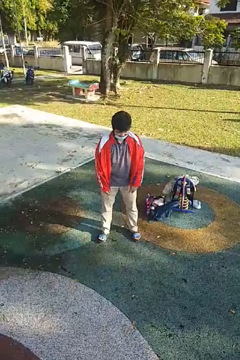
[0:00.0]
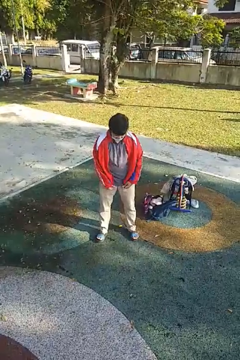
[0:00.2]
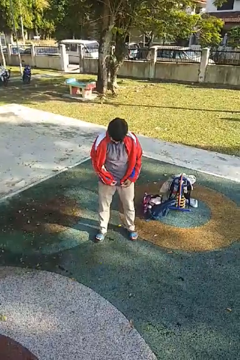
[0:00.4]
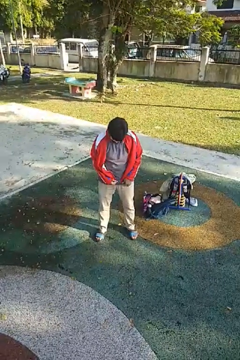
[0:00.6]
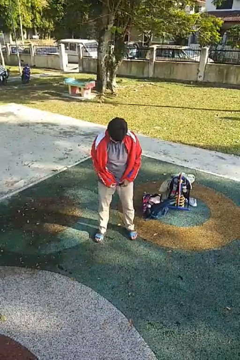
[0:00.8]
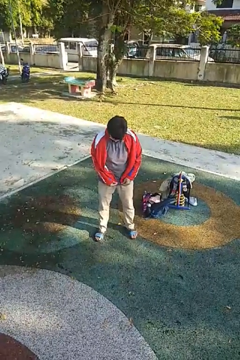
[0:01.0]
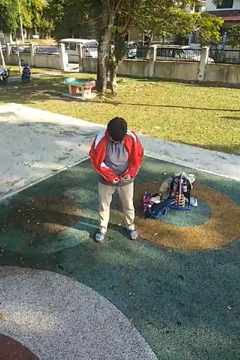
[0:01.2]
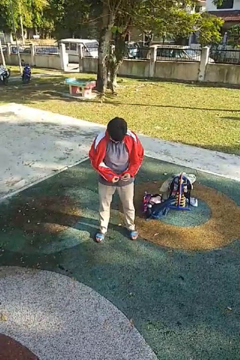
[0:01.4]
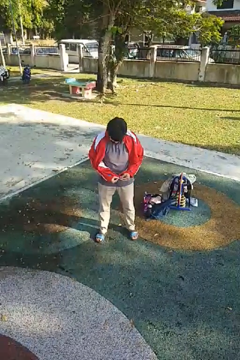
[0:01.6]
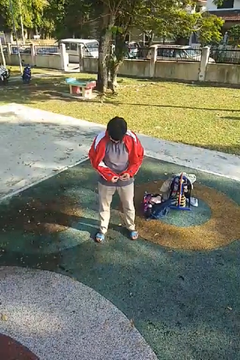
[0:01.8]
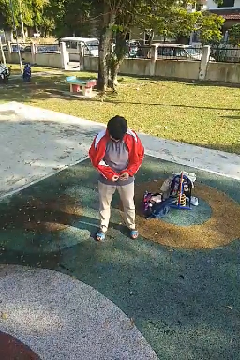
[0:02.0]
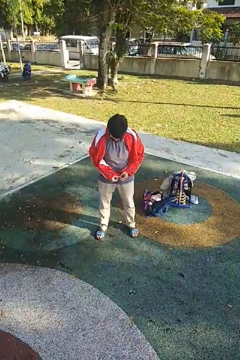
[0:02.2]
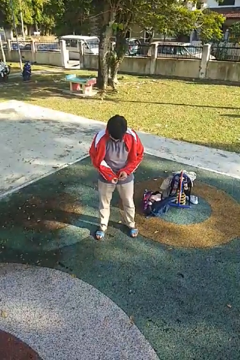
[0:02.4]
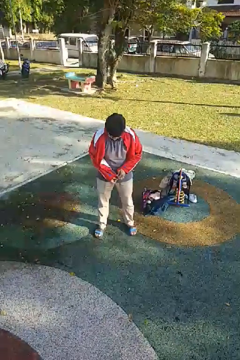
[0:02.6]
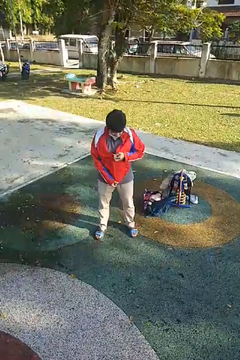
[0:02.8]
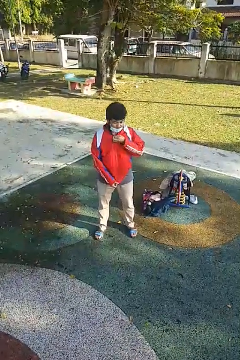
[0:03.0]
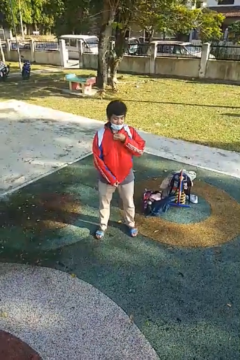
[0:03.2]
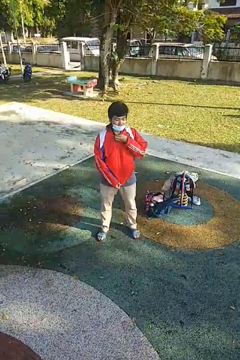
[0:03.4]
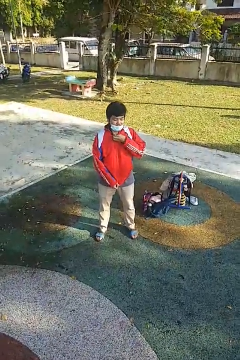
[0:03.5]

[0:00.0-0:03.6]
person zips up jacket

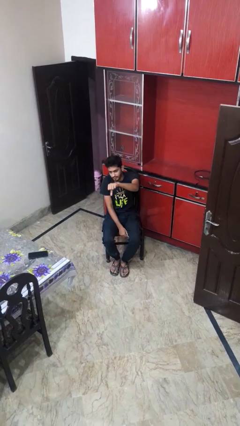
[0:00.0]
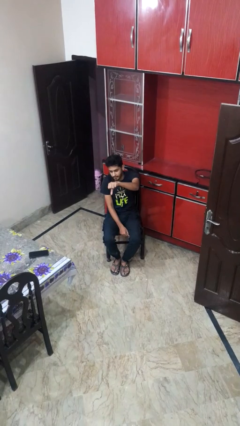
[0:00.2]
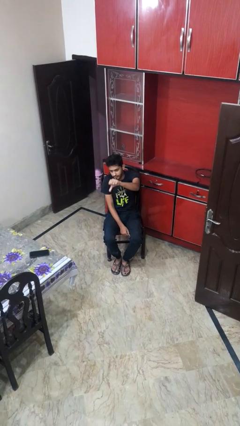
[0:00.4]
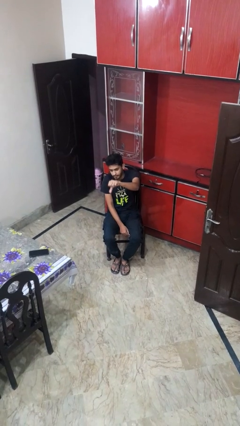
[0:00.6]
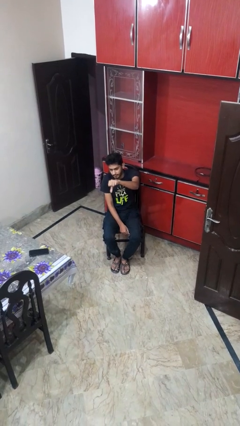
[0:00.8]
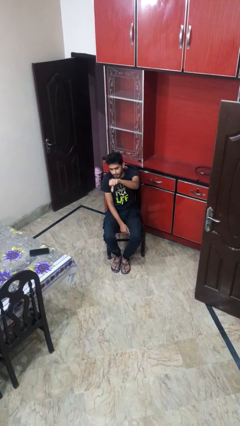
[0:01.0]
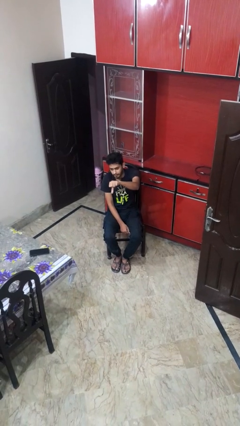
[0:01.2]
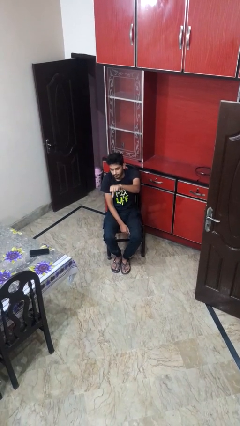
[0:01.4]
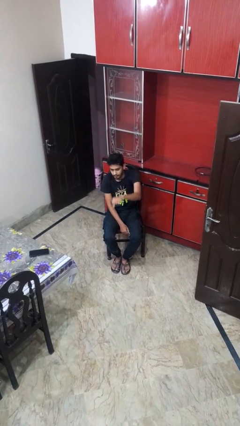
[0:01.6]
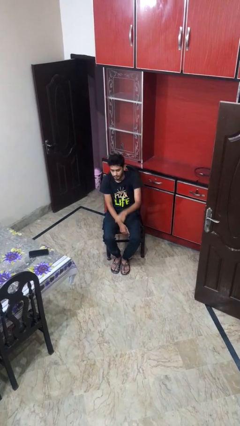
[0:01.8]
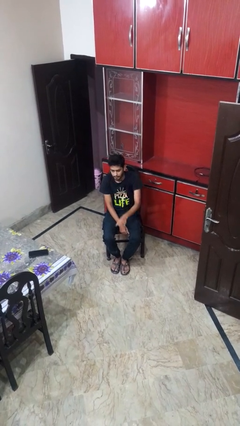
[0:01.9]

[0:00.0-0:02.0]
person gestures thumbs down

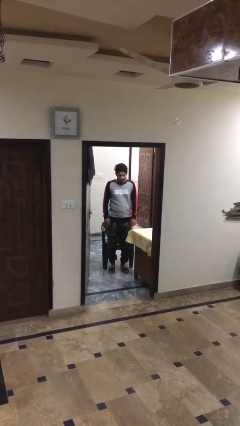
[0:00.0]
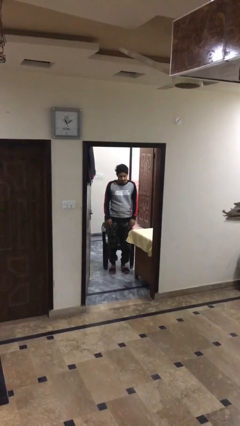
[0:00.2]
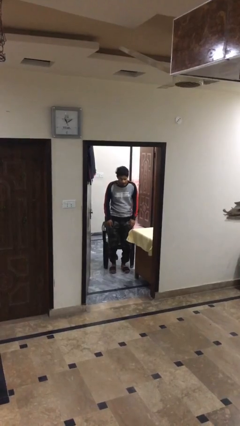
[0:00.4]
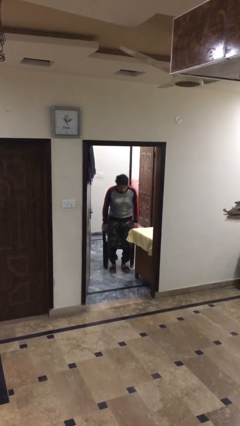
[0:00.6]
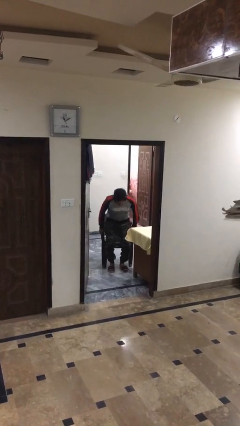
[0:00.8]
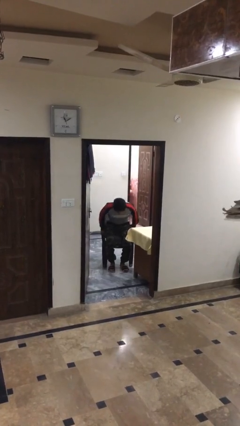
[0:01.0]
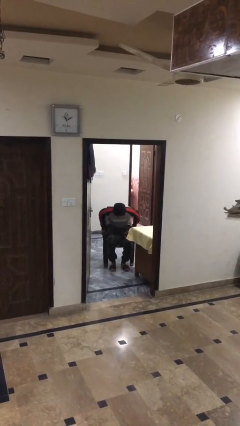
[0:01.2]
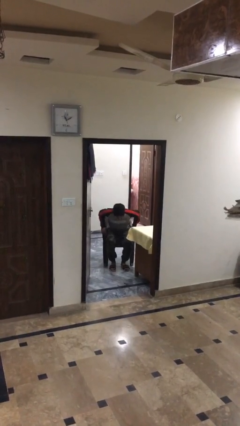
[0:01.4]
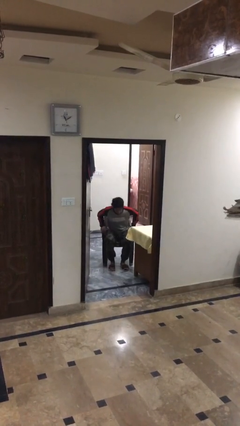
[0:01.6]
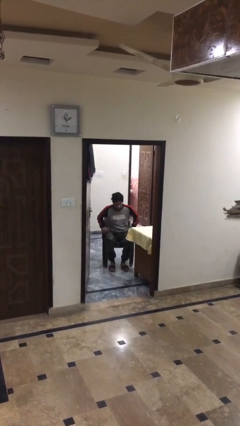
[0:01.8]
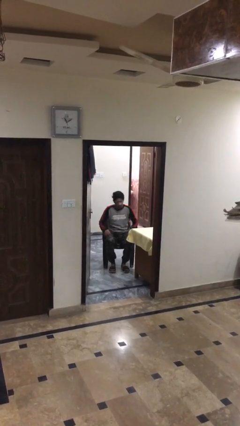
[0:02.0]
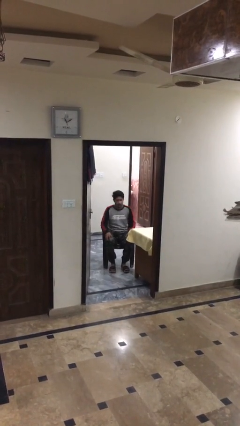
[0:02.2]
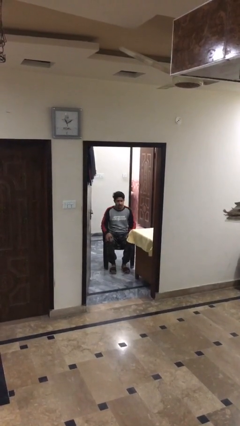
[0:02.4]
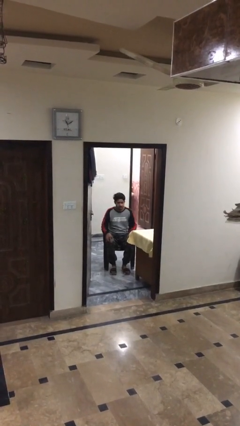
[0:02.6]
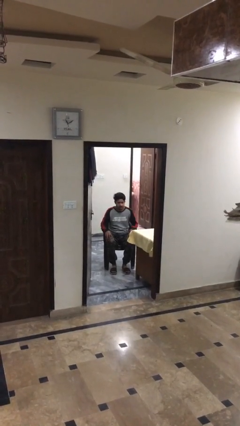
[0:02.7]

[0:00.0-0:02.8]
person sits down

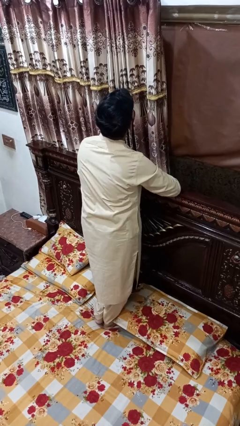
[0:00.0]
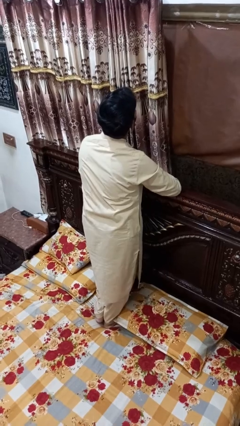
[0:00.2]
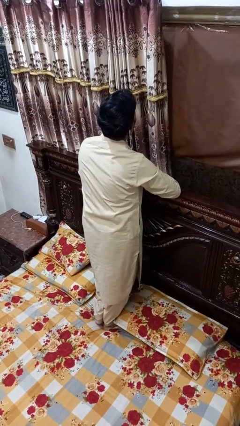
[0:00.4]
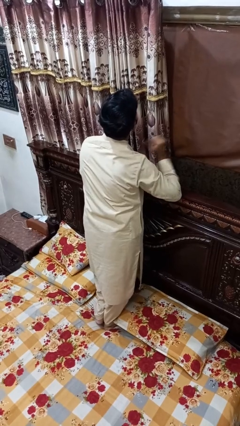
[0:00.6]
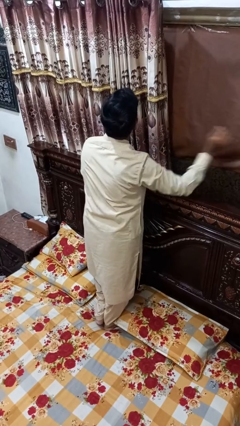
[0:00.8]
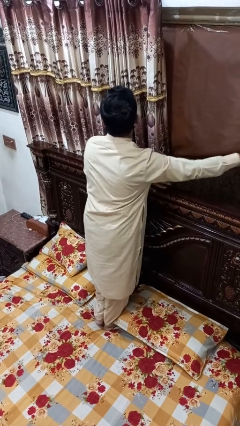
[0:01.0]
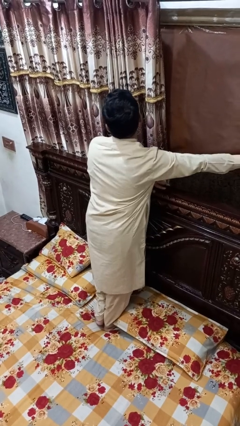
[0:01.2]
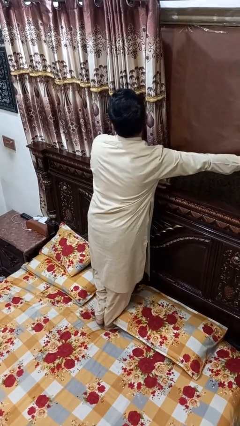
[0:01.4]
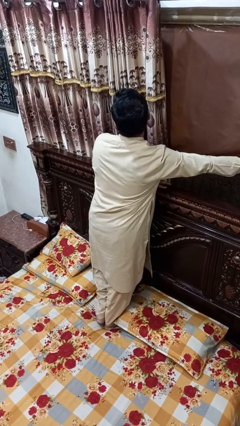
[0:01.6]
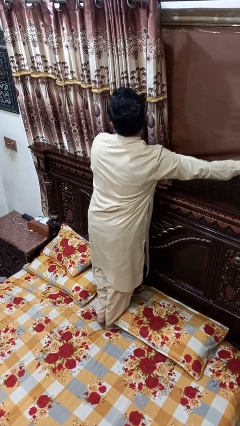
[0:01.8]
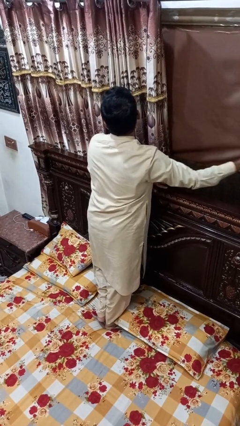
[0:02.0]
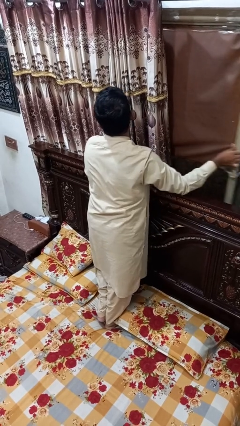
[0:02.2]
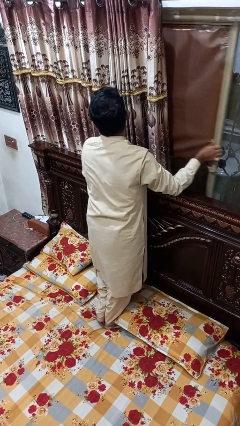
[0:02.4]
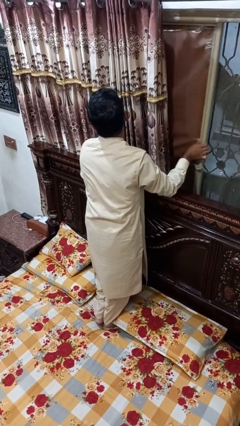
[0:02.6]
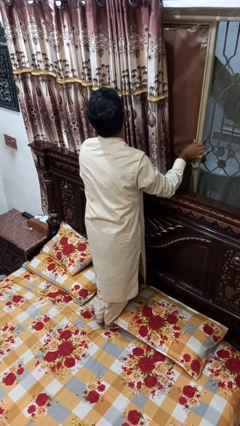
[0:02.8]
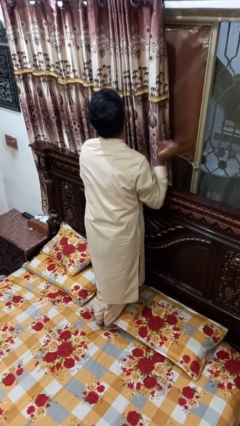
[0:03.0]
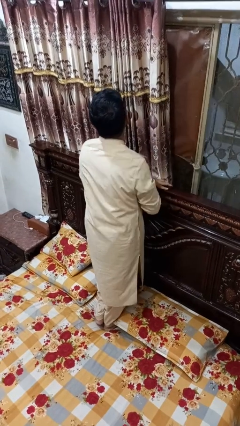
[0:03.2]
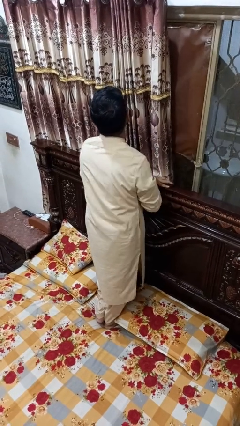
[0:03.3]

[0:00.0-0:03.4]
person opens home window

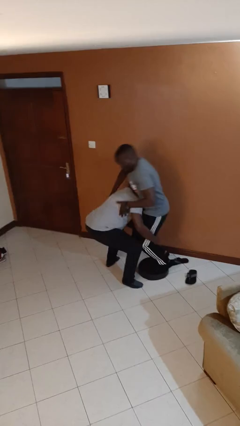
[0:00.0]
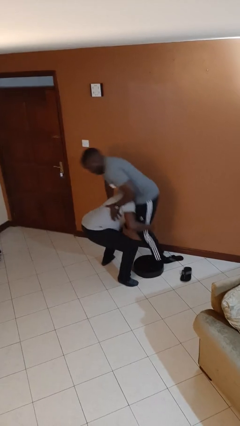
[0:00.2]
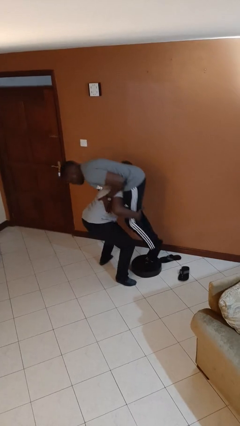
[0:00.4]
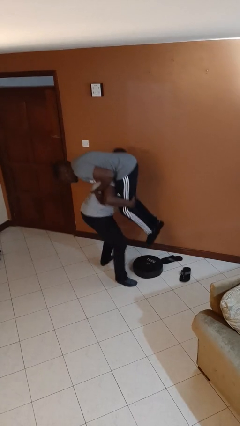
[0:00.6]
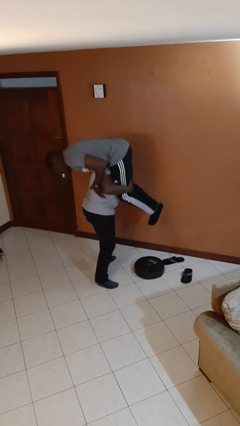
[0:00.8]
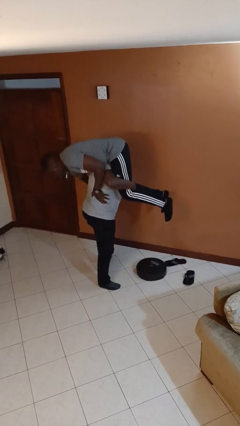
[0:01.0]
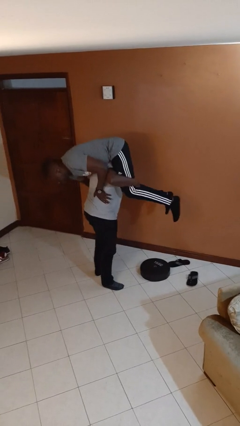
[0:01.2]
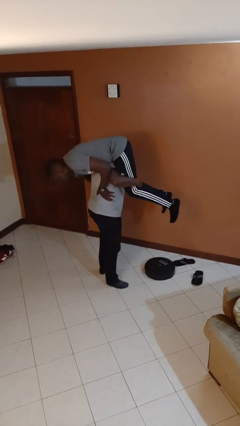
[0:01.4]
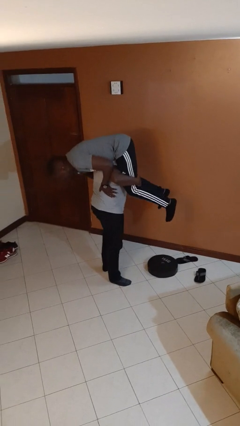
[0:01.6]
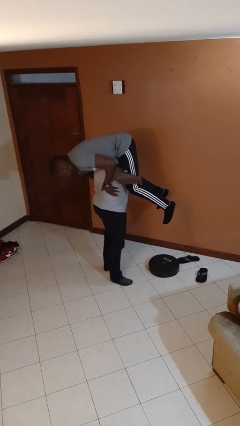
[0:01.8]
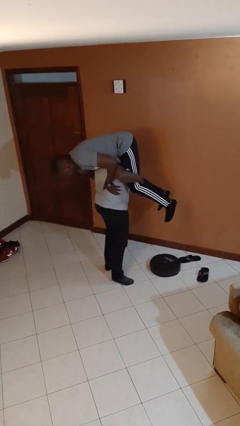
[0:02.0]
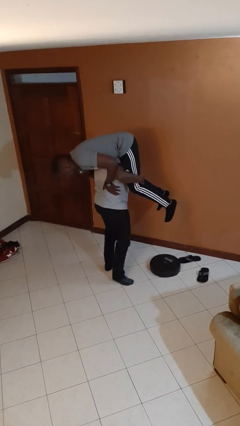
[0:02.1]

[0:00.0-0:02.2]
person carries person over shoulder

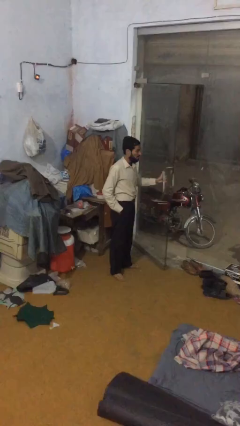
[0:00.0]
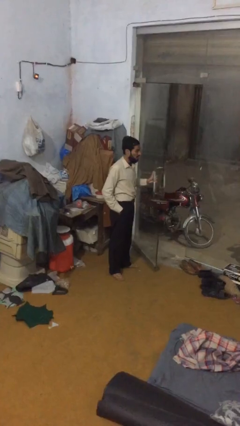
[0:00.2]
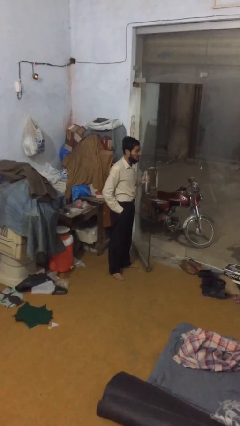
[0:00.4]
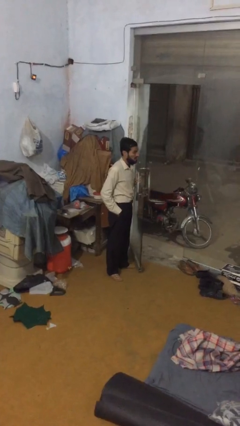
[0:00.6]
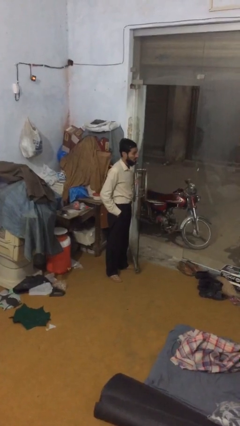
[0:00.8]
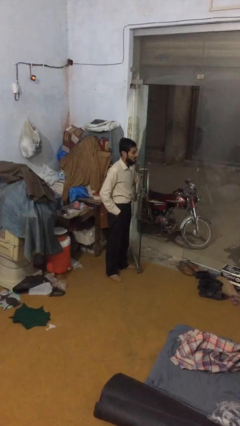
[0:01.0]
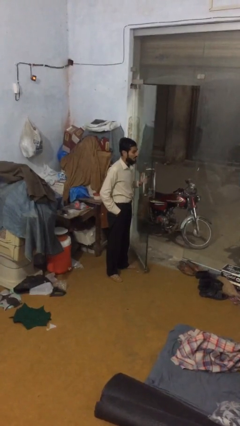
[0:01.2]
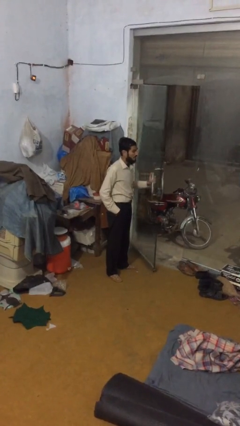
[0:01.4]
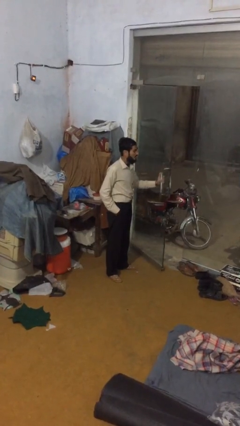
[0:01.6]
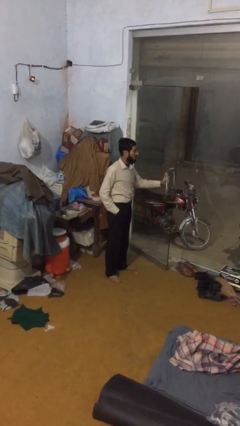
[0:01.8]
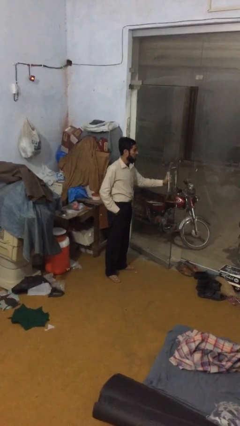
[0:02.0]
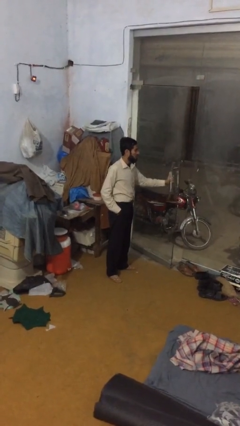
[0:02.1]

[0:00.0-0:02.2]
person closes facility door

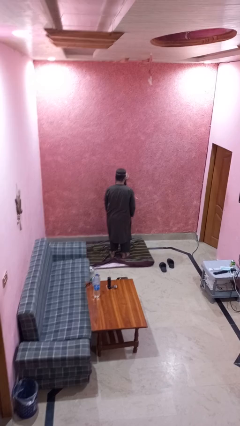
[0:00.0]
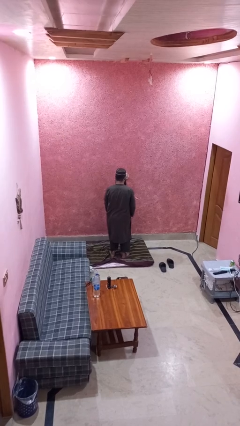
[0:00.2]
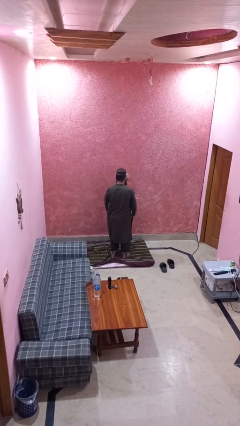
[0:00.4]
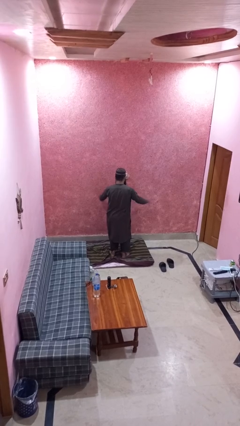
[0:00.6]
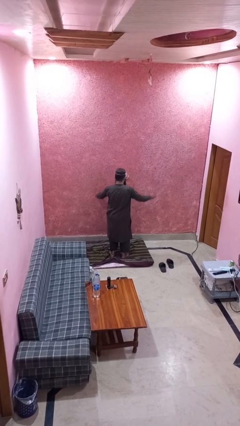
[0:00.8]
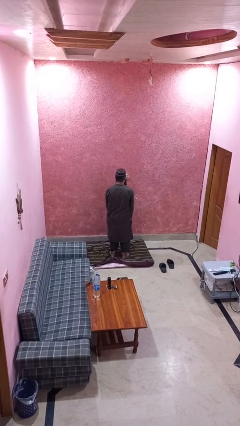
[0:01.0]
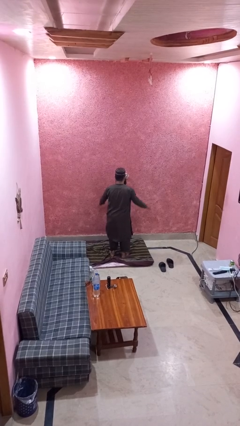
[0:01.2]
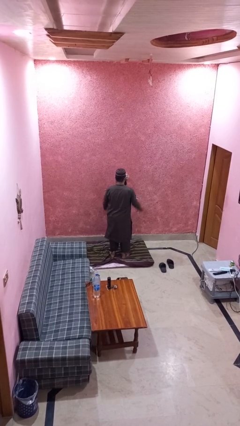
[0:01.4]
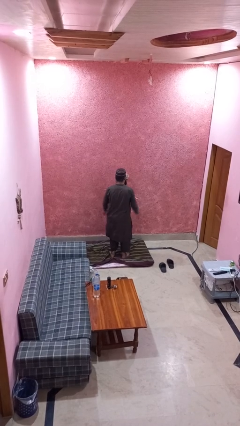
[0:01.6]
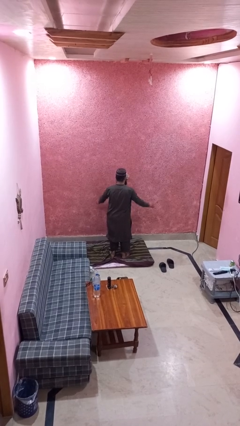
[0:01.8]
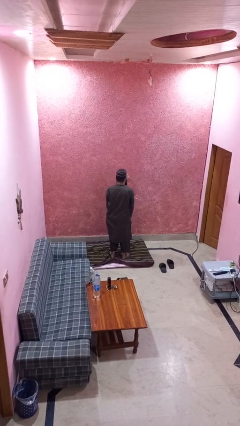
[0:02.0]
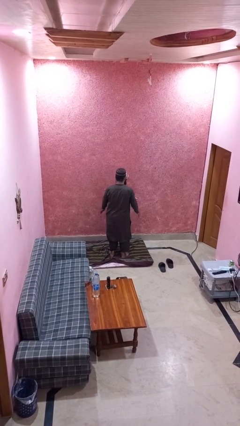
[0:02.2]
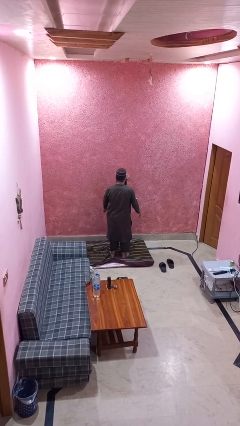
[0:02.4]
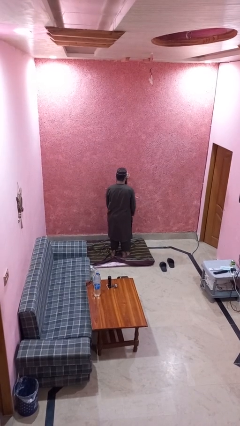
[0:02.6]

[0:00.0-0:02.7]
person slaps hands on thighs
